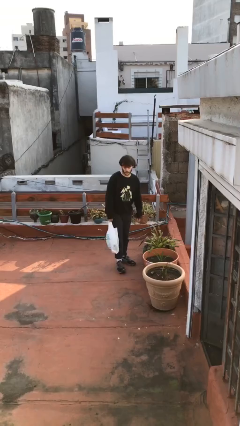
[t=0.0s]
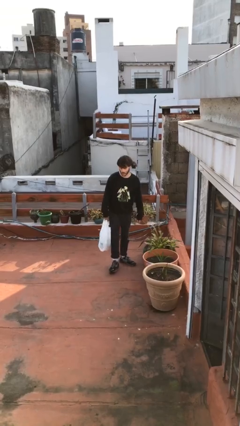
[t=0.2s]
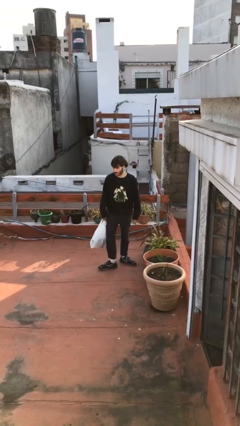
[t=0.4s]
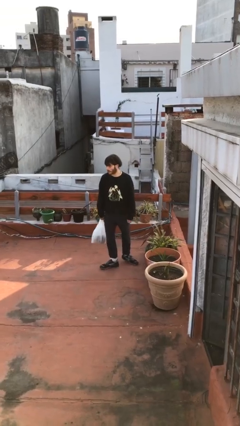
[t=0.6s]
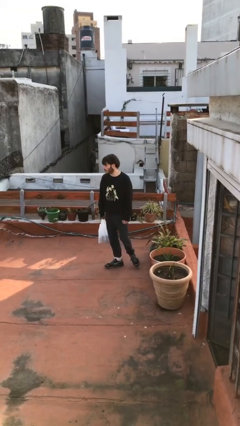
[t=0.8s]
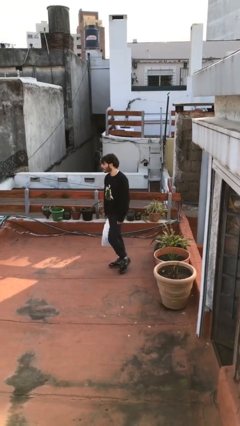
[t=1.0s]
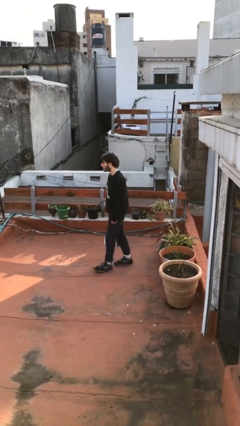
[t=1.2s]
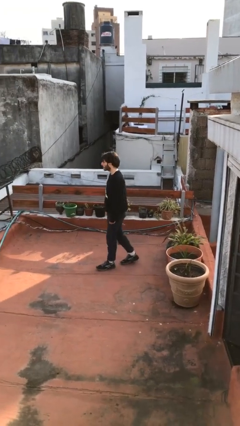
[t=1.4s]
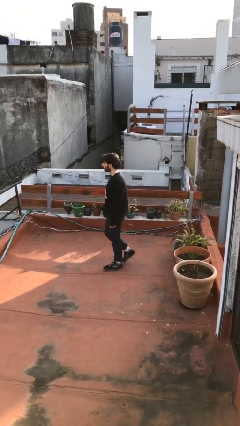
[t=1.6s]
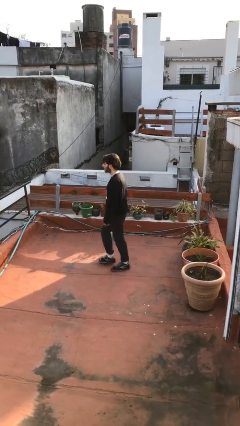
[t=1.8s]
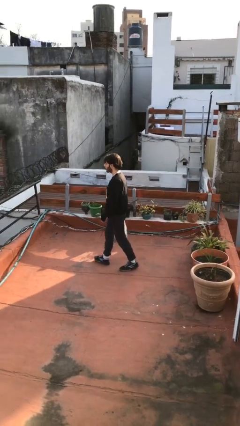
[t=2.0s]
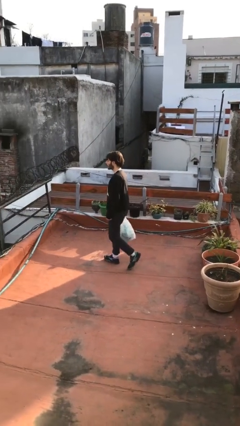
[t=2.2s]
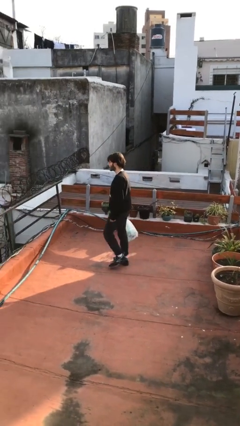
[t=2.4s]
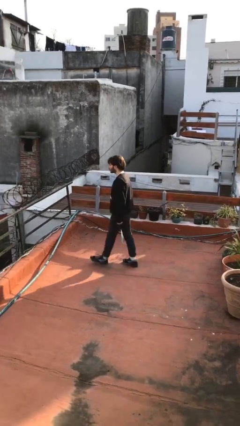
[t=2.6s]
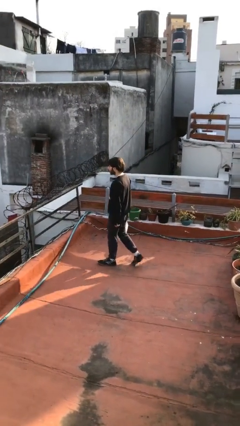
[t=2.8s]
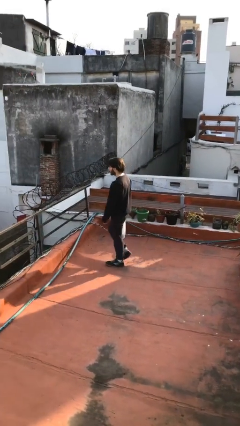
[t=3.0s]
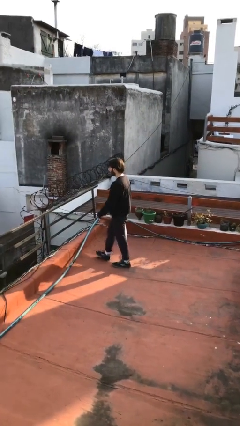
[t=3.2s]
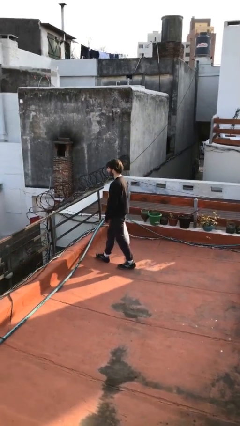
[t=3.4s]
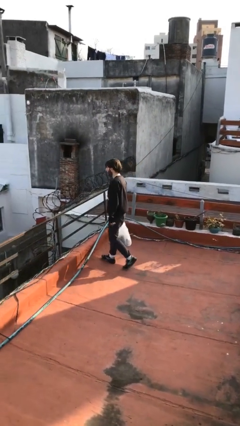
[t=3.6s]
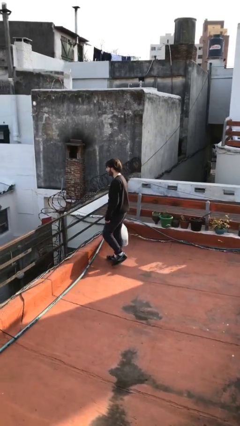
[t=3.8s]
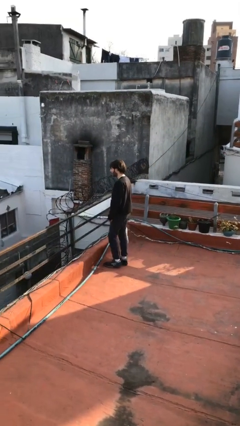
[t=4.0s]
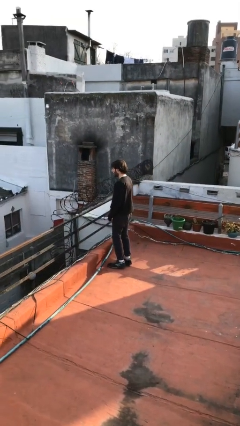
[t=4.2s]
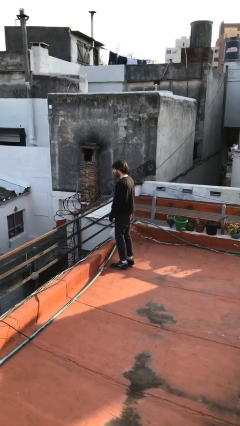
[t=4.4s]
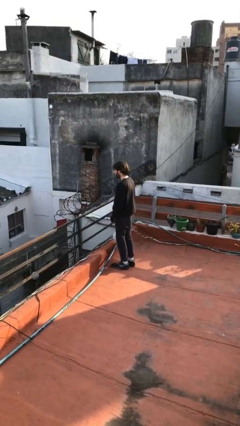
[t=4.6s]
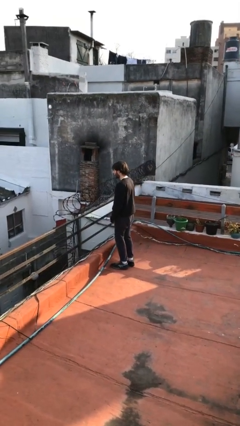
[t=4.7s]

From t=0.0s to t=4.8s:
person carries groceries

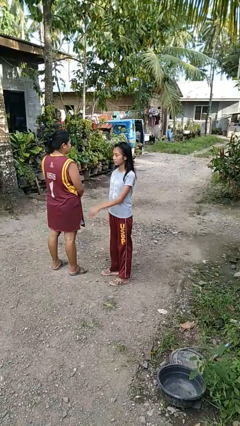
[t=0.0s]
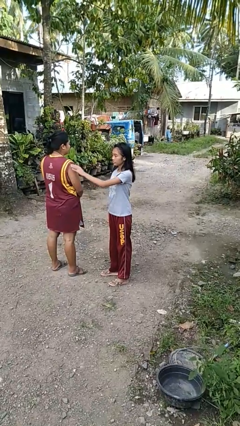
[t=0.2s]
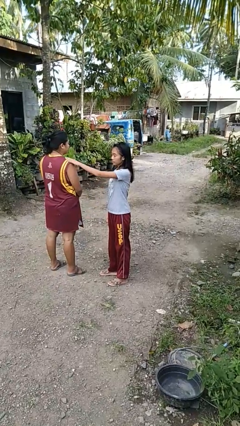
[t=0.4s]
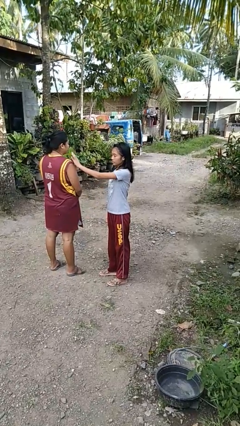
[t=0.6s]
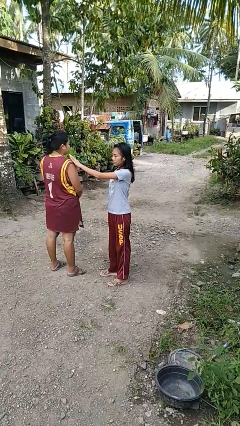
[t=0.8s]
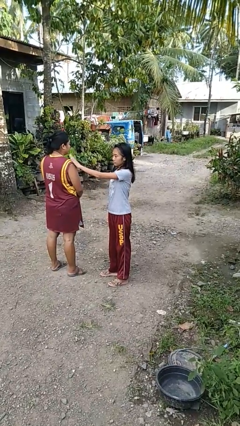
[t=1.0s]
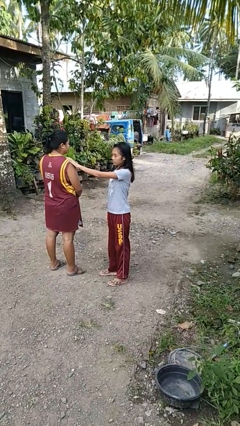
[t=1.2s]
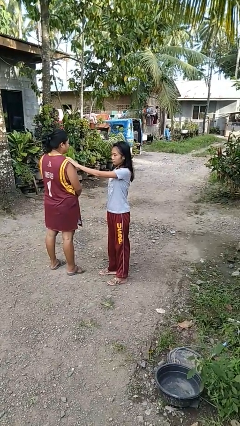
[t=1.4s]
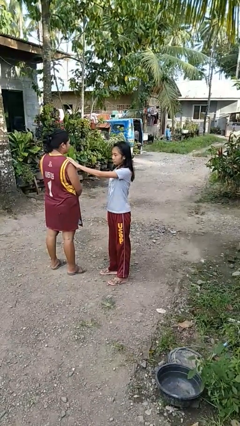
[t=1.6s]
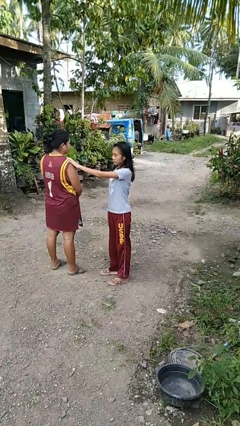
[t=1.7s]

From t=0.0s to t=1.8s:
person pounds shoulders of person

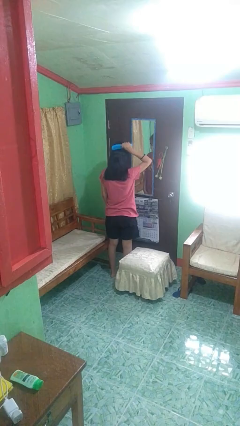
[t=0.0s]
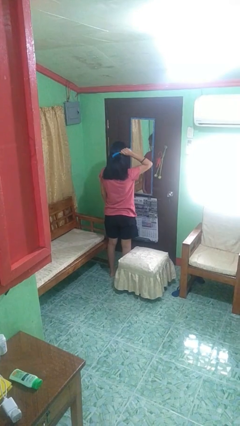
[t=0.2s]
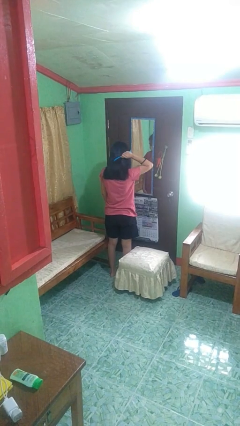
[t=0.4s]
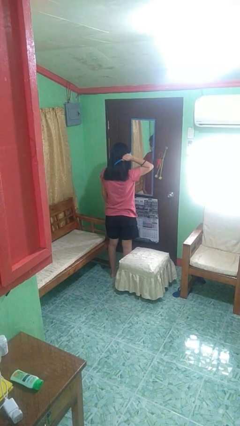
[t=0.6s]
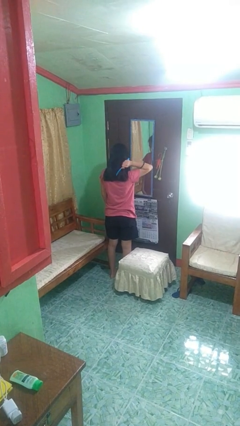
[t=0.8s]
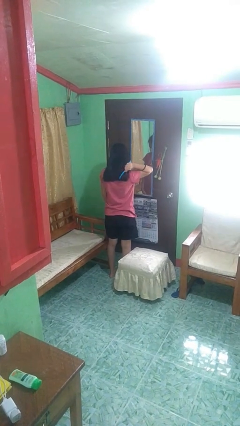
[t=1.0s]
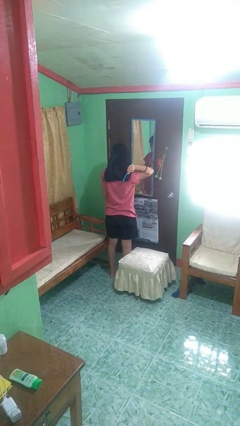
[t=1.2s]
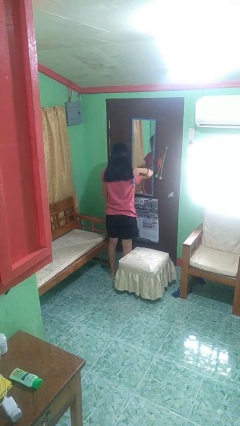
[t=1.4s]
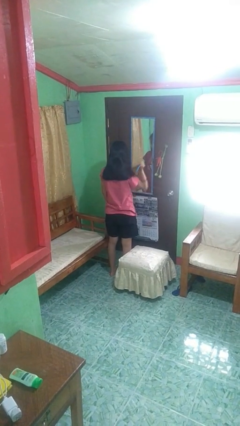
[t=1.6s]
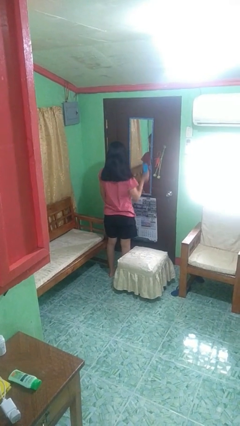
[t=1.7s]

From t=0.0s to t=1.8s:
person brushes hair

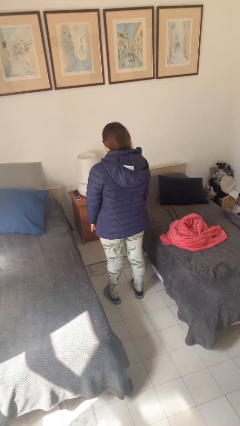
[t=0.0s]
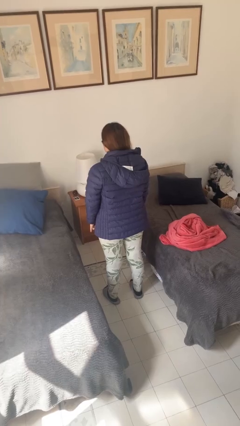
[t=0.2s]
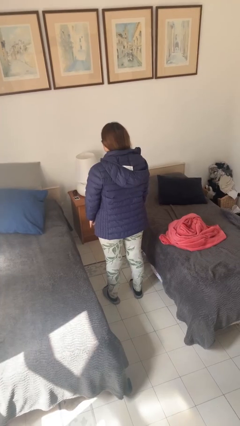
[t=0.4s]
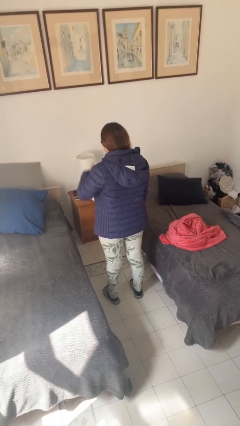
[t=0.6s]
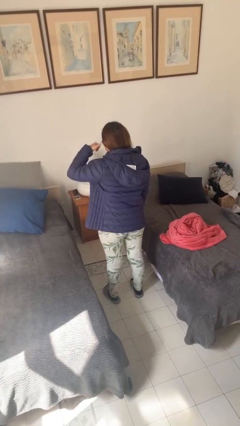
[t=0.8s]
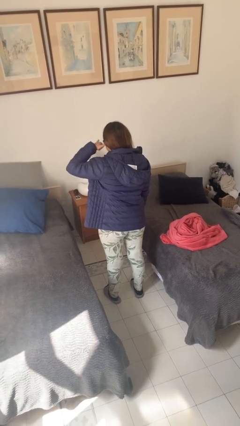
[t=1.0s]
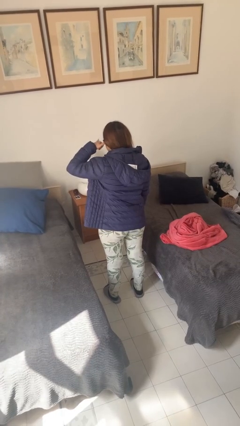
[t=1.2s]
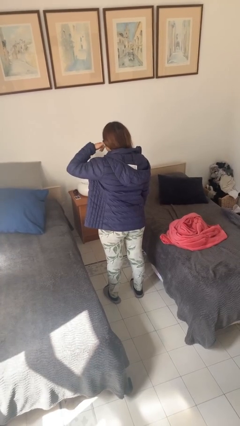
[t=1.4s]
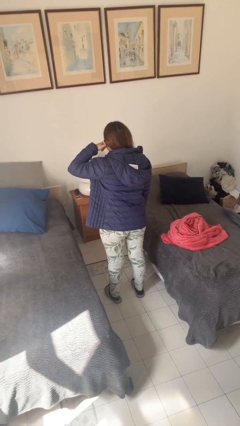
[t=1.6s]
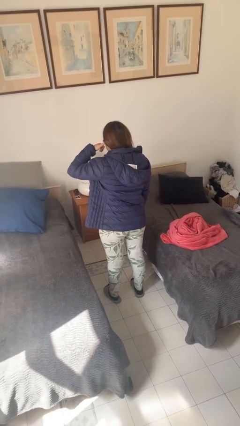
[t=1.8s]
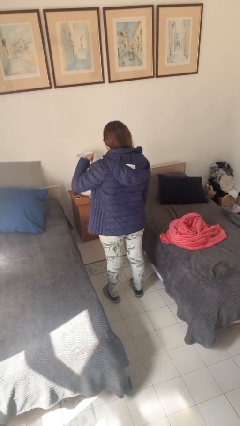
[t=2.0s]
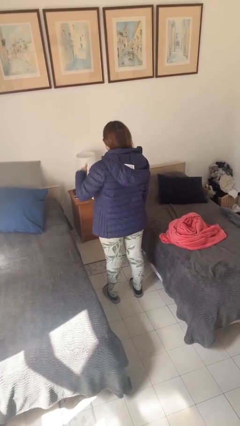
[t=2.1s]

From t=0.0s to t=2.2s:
person gestures call me

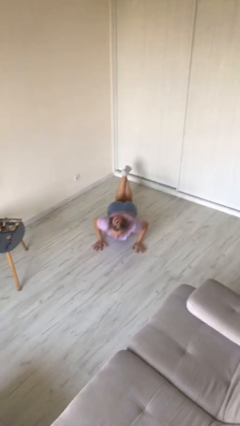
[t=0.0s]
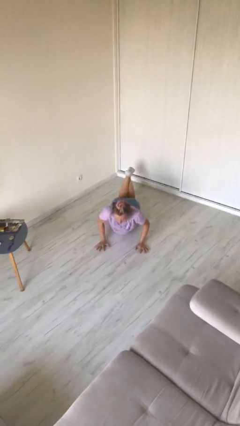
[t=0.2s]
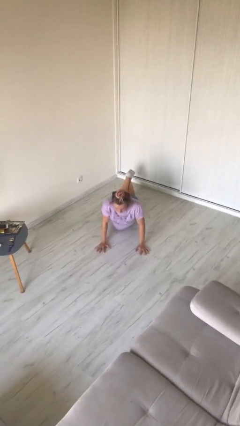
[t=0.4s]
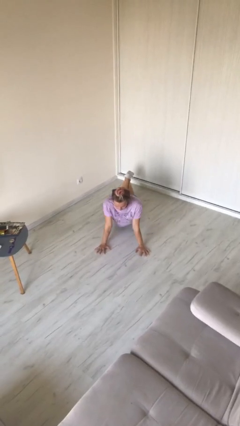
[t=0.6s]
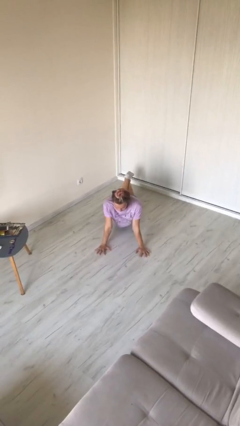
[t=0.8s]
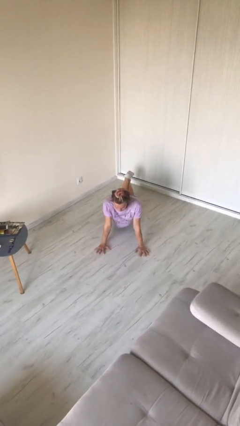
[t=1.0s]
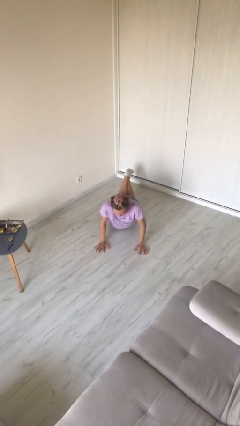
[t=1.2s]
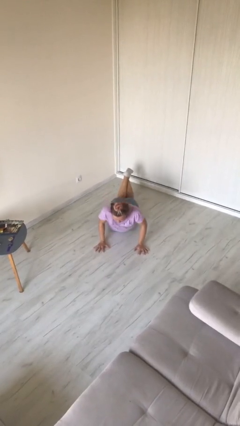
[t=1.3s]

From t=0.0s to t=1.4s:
person exercises with pushup

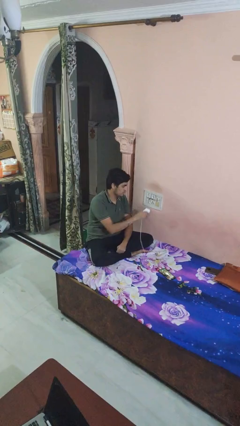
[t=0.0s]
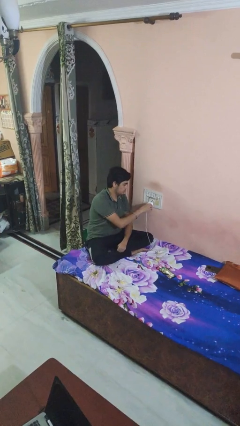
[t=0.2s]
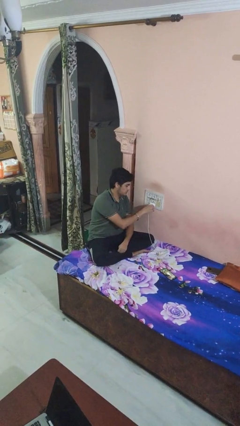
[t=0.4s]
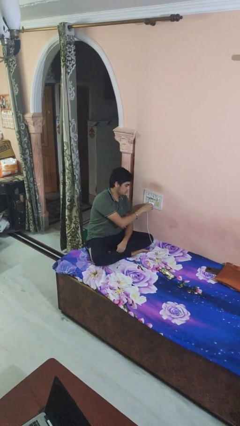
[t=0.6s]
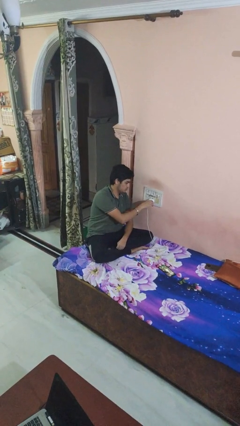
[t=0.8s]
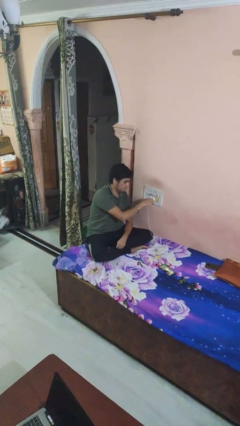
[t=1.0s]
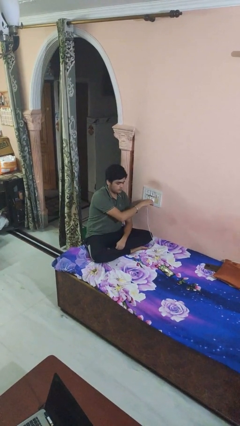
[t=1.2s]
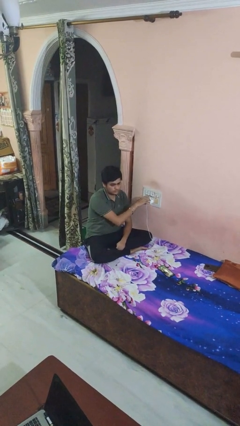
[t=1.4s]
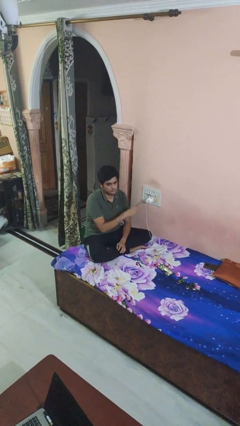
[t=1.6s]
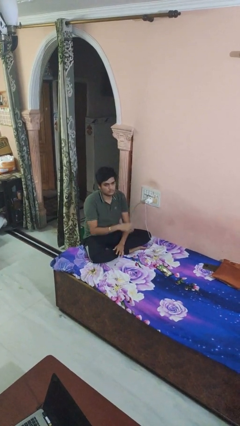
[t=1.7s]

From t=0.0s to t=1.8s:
person plugs into electrical socket

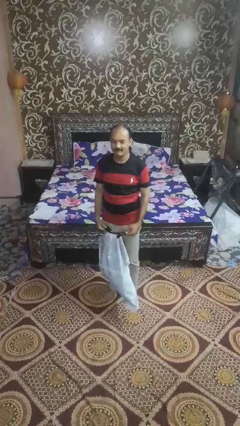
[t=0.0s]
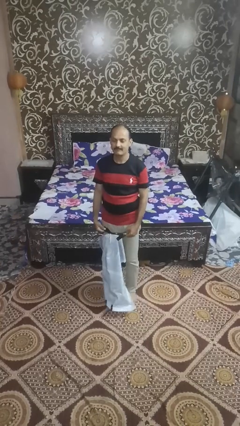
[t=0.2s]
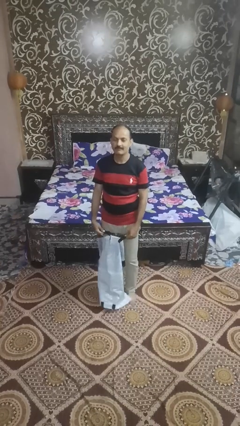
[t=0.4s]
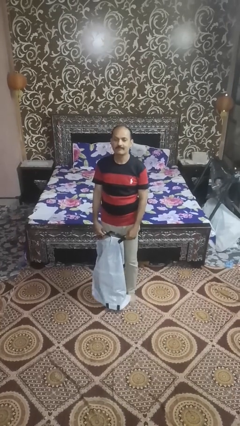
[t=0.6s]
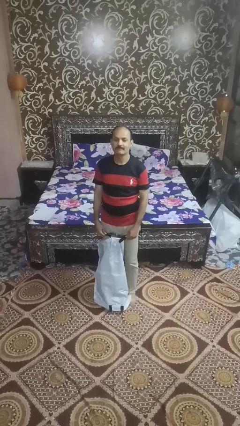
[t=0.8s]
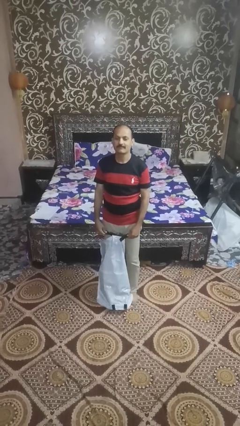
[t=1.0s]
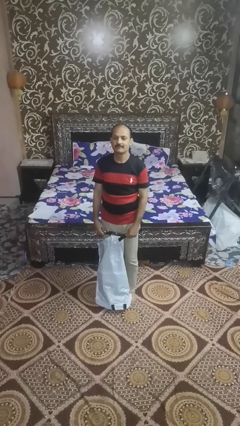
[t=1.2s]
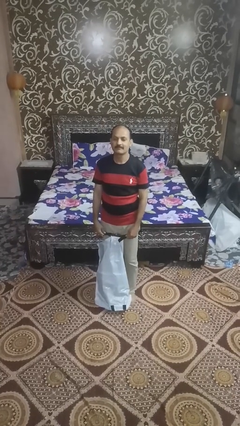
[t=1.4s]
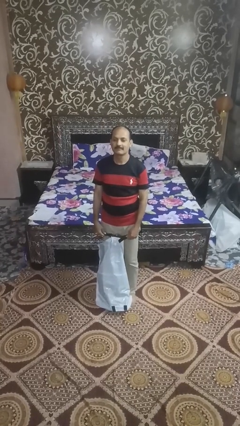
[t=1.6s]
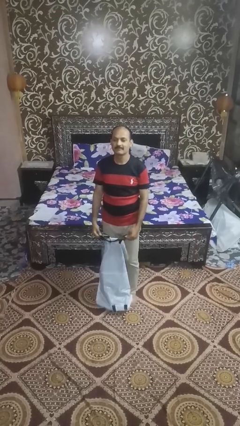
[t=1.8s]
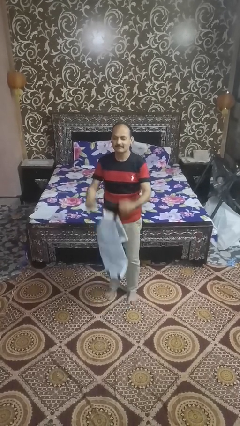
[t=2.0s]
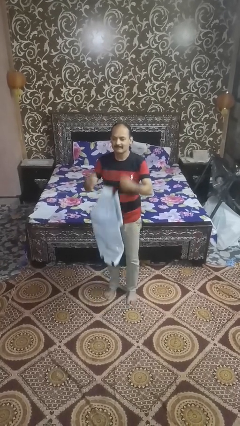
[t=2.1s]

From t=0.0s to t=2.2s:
person tears paper

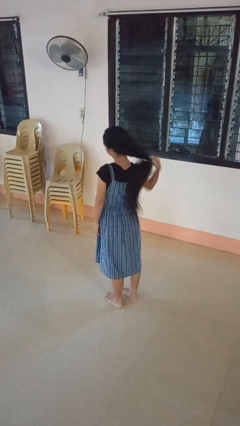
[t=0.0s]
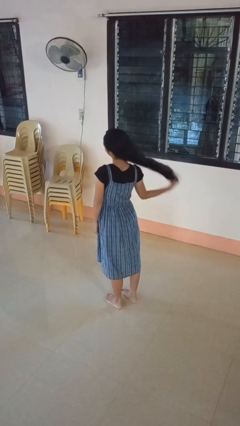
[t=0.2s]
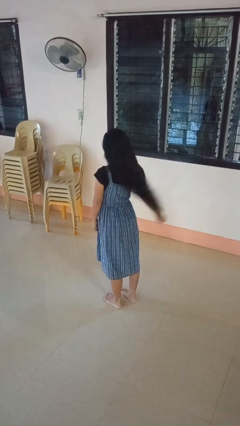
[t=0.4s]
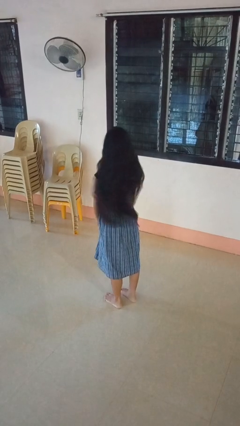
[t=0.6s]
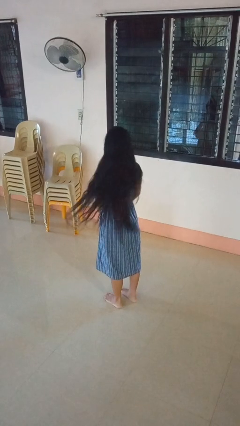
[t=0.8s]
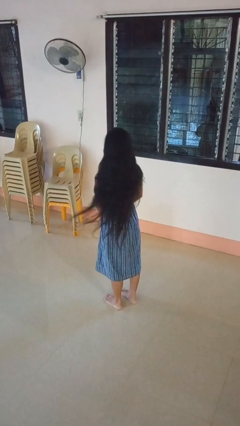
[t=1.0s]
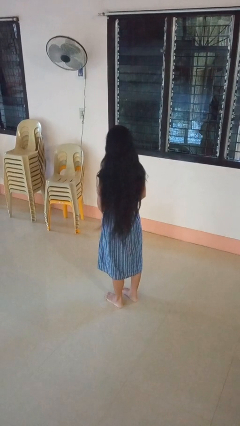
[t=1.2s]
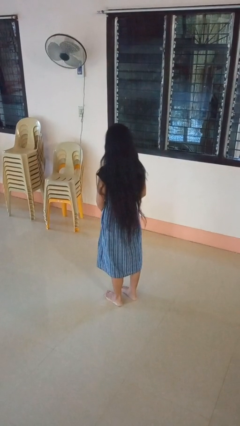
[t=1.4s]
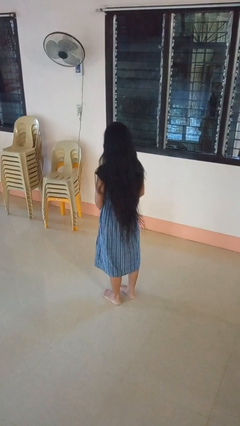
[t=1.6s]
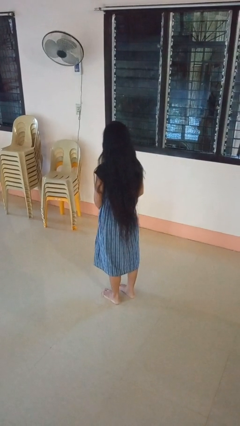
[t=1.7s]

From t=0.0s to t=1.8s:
person takes off hairtie
